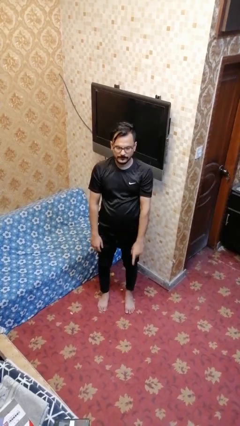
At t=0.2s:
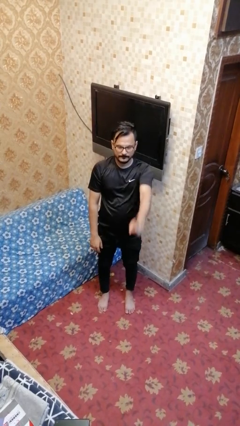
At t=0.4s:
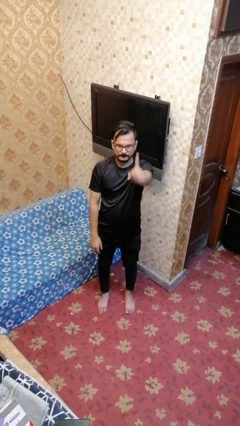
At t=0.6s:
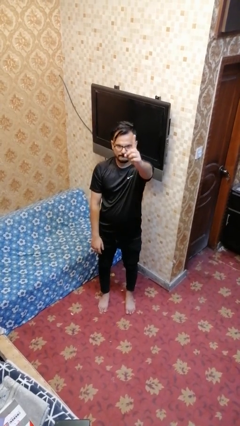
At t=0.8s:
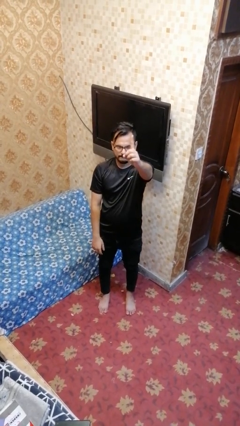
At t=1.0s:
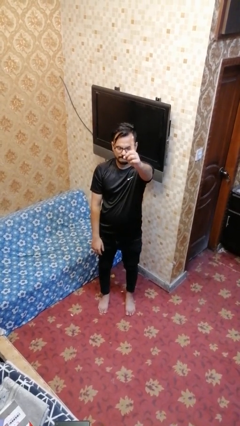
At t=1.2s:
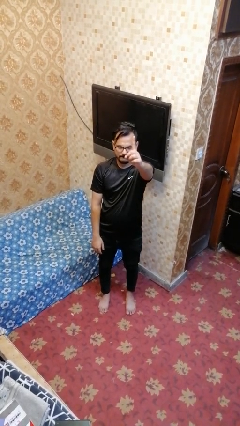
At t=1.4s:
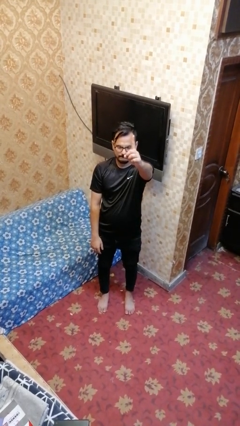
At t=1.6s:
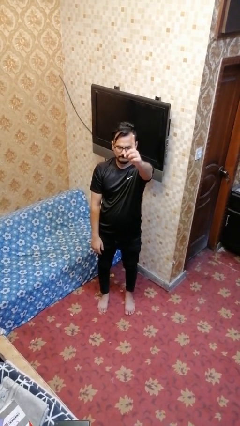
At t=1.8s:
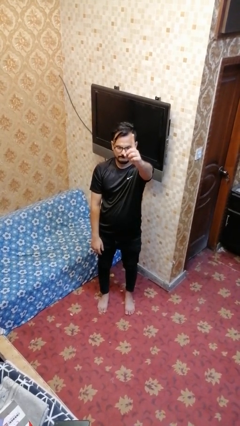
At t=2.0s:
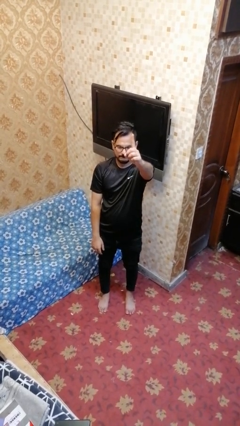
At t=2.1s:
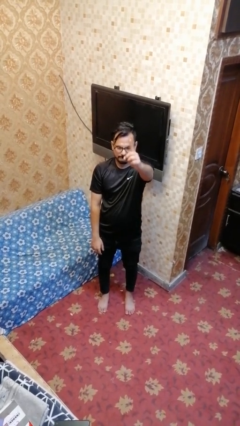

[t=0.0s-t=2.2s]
person gestures number one

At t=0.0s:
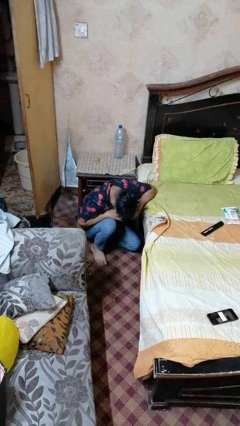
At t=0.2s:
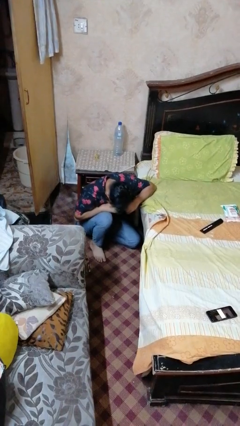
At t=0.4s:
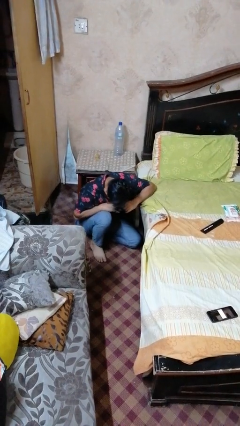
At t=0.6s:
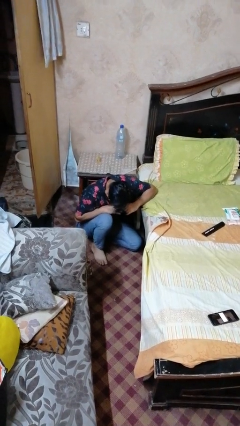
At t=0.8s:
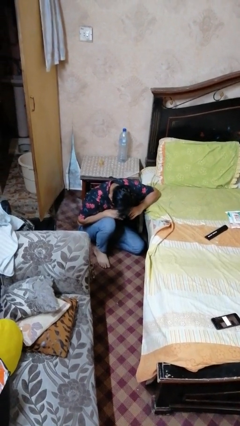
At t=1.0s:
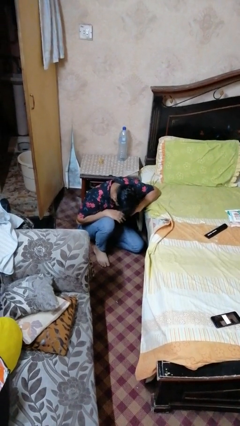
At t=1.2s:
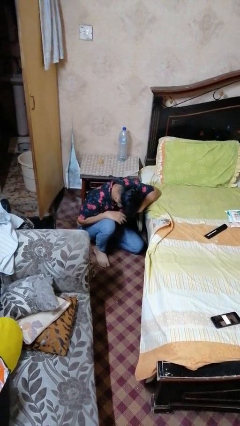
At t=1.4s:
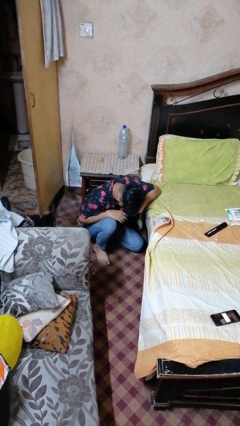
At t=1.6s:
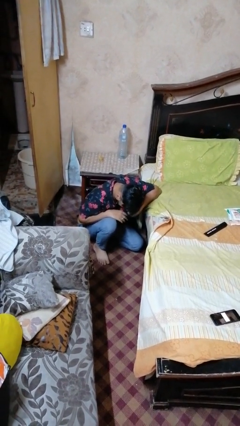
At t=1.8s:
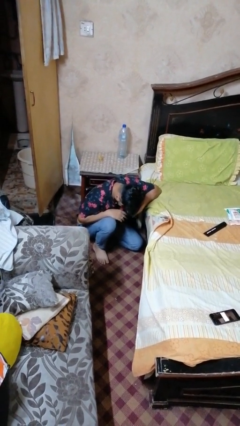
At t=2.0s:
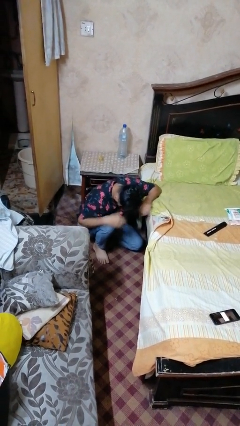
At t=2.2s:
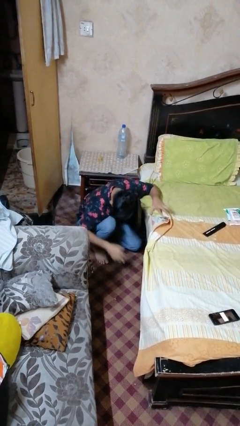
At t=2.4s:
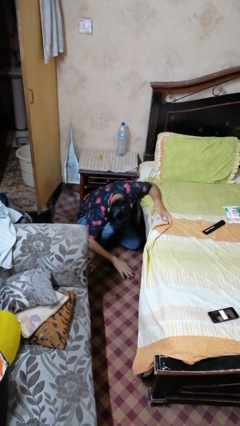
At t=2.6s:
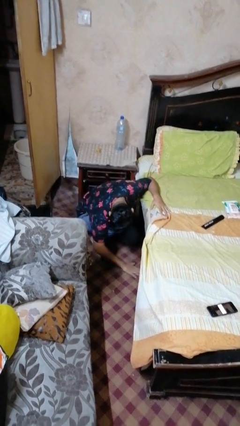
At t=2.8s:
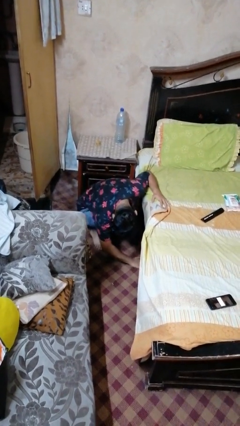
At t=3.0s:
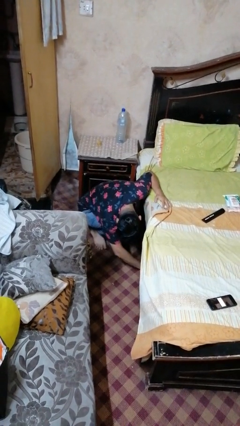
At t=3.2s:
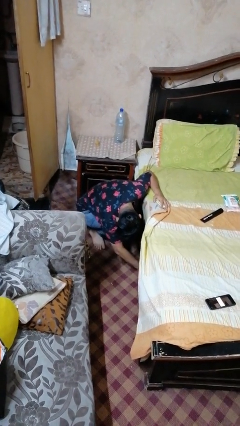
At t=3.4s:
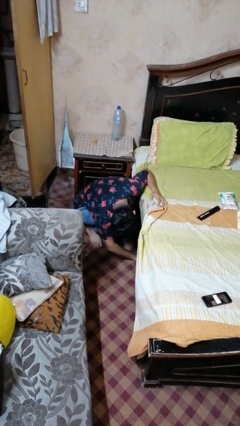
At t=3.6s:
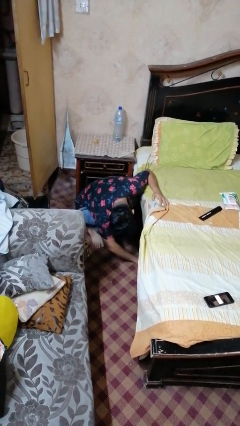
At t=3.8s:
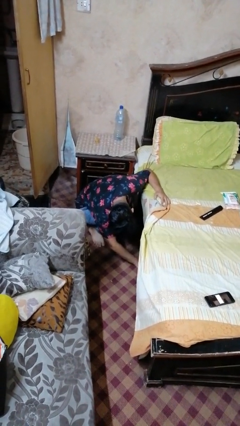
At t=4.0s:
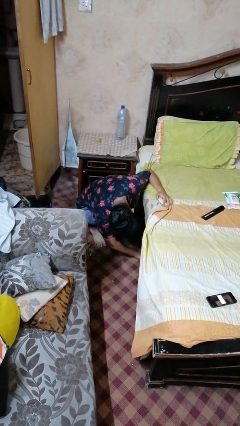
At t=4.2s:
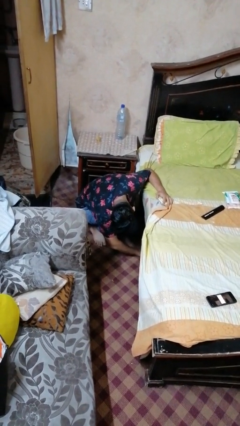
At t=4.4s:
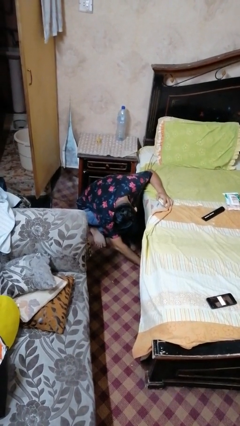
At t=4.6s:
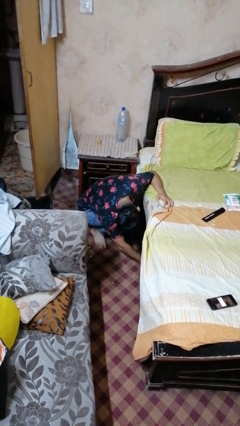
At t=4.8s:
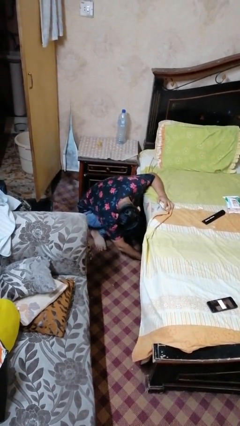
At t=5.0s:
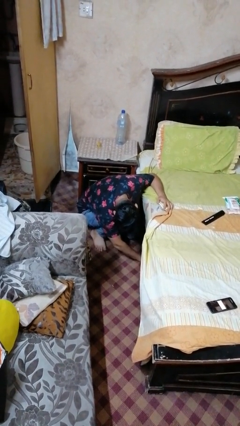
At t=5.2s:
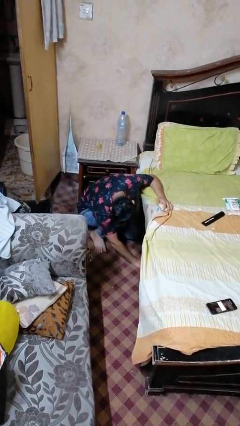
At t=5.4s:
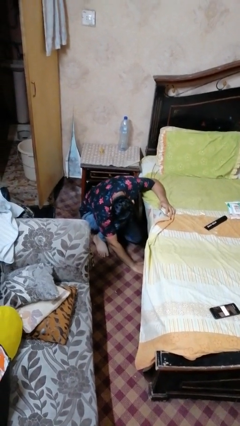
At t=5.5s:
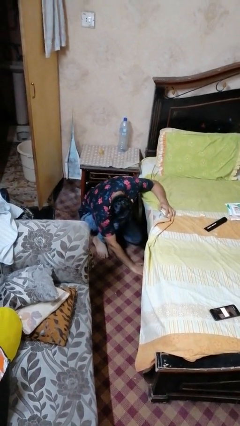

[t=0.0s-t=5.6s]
person searches under bed

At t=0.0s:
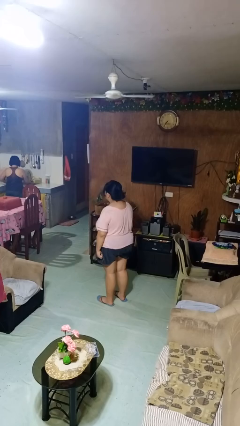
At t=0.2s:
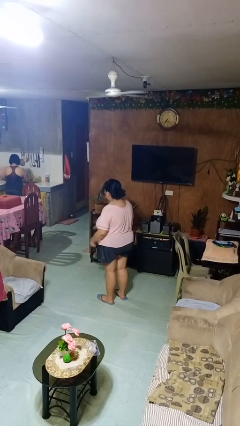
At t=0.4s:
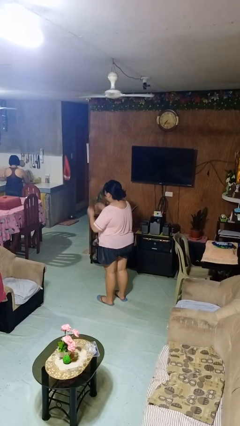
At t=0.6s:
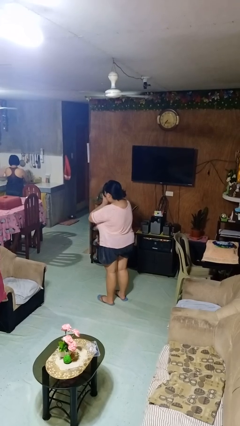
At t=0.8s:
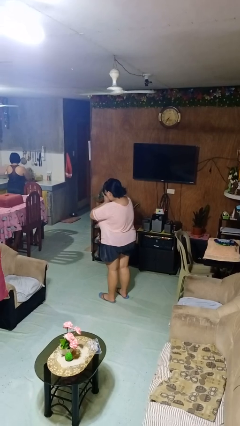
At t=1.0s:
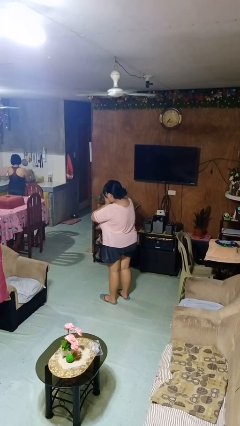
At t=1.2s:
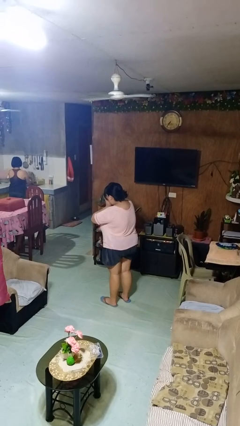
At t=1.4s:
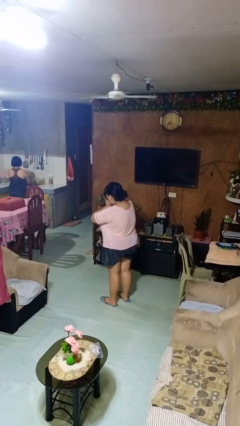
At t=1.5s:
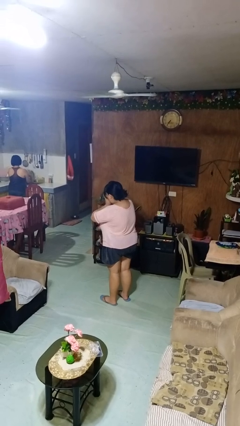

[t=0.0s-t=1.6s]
person blows into hands

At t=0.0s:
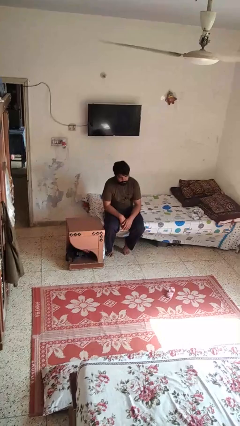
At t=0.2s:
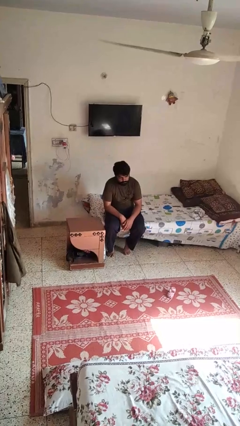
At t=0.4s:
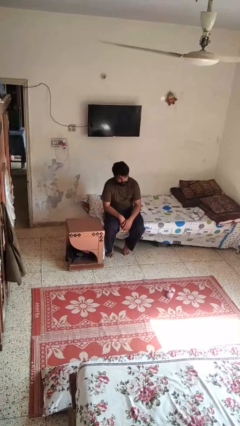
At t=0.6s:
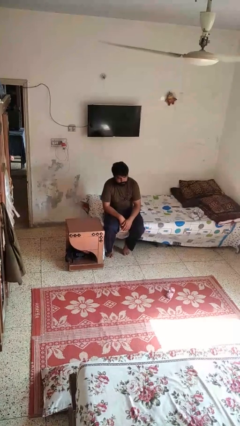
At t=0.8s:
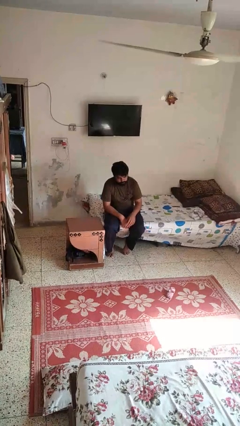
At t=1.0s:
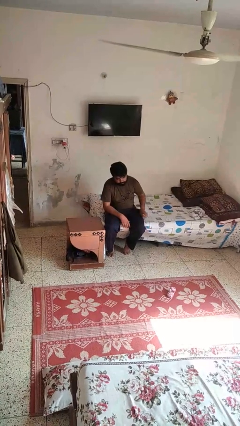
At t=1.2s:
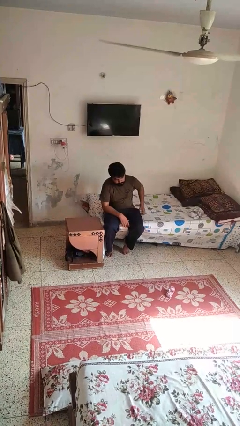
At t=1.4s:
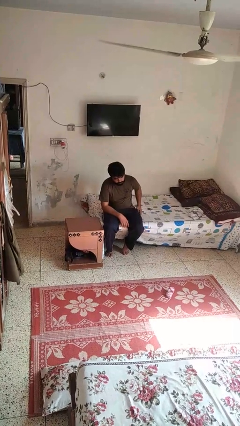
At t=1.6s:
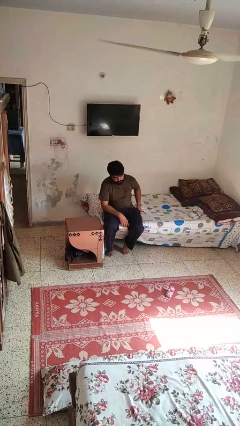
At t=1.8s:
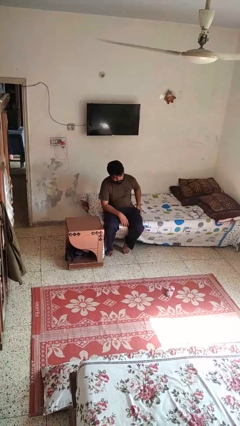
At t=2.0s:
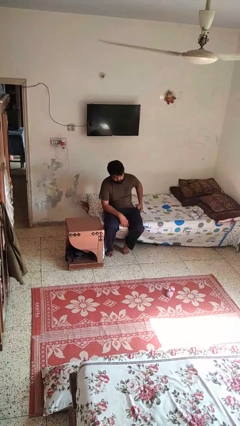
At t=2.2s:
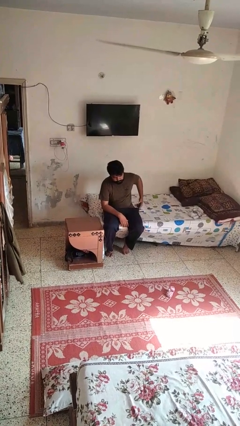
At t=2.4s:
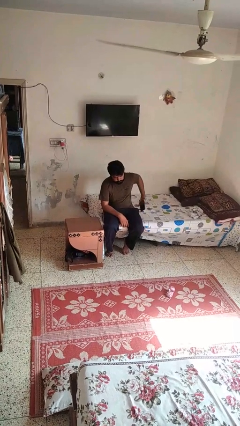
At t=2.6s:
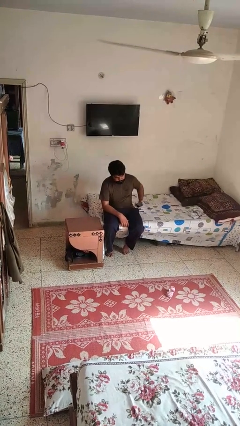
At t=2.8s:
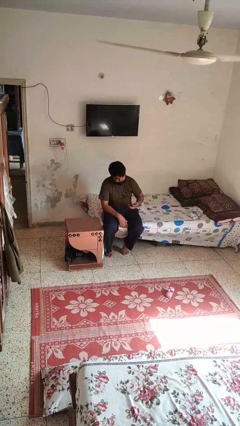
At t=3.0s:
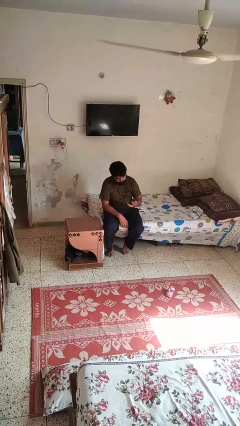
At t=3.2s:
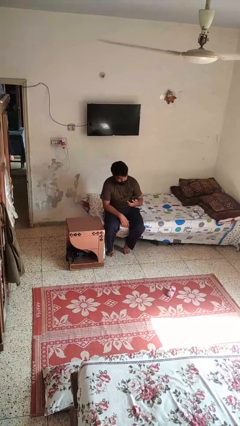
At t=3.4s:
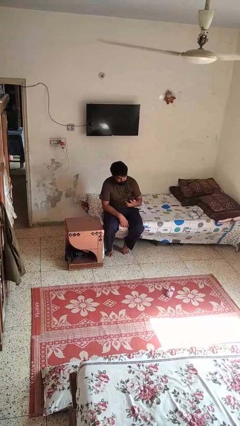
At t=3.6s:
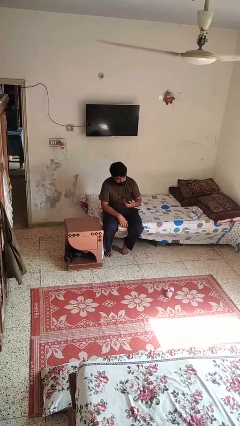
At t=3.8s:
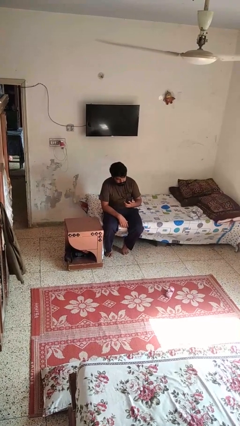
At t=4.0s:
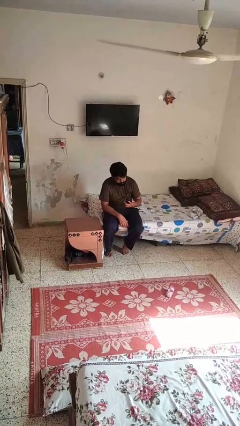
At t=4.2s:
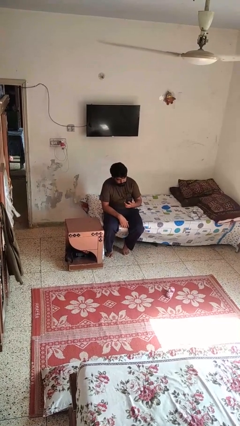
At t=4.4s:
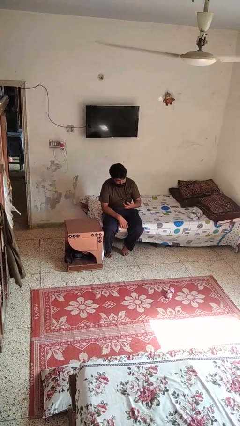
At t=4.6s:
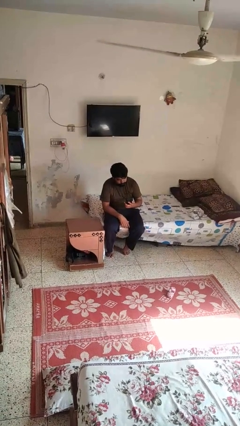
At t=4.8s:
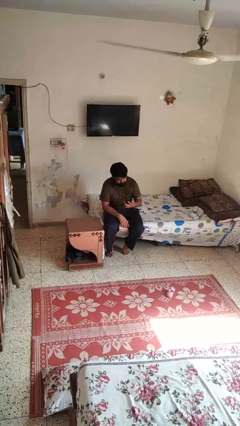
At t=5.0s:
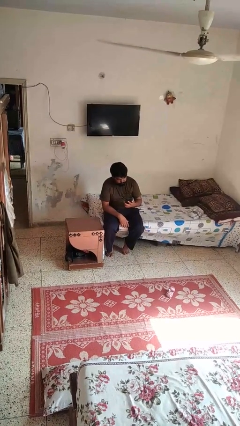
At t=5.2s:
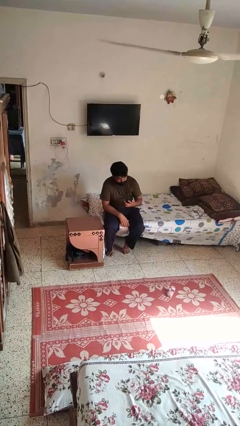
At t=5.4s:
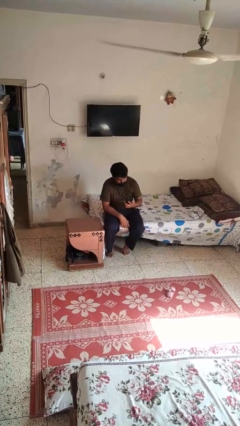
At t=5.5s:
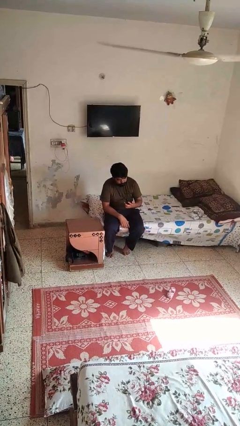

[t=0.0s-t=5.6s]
person takes phone from pocket

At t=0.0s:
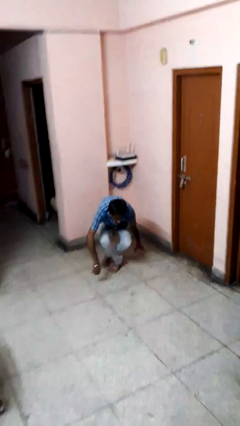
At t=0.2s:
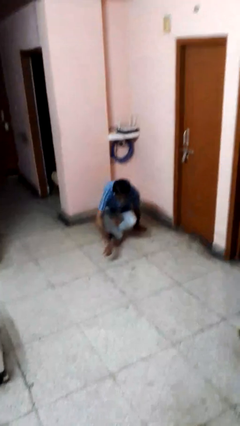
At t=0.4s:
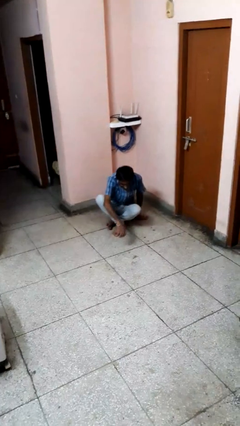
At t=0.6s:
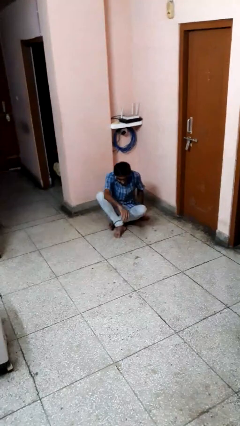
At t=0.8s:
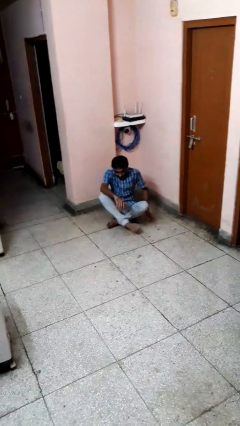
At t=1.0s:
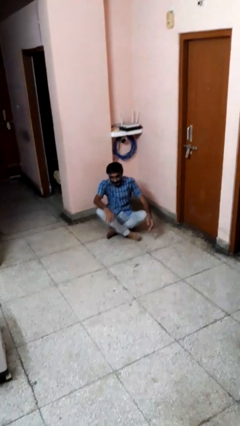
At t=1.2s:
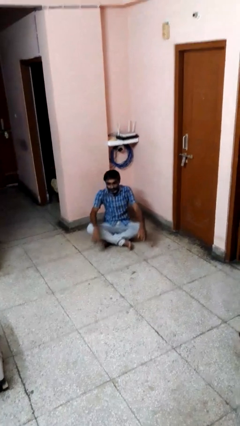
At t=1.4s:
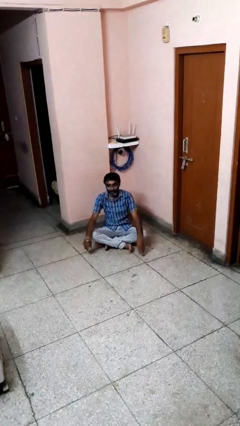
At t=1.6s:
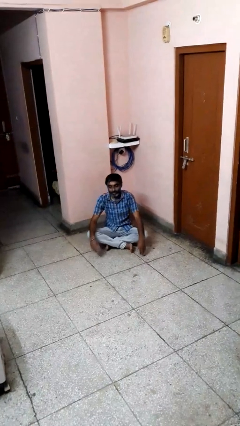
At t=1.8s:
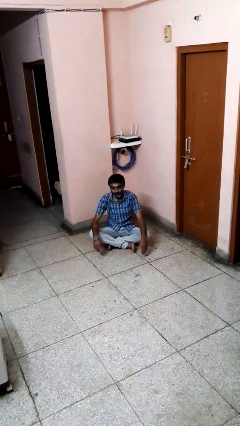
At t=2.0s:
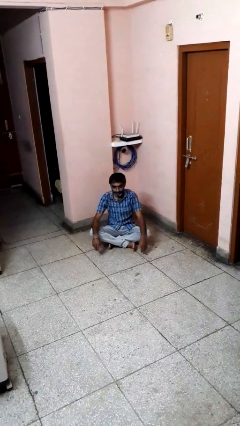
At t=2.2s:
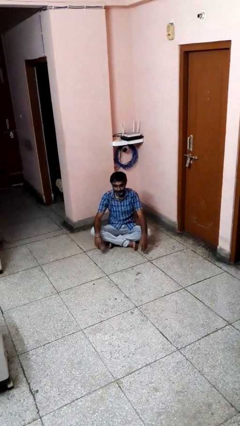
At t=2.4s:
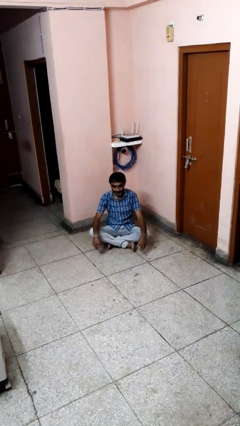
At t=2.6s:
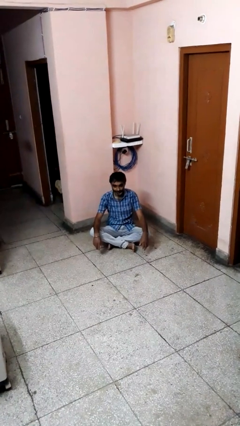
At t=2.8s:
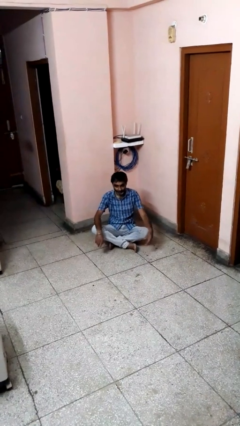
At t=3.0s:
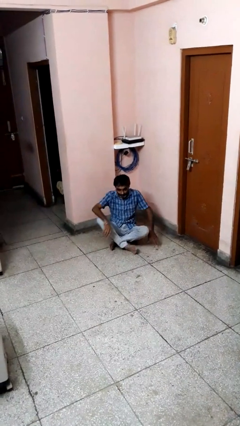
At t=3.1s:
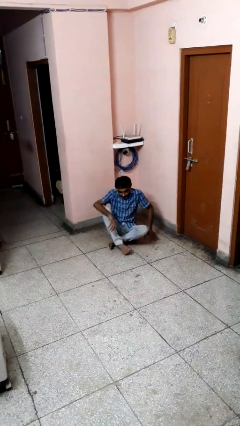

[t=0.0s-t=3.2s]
person sits crisscross
